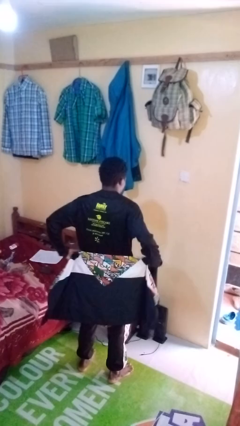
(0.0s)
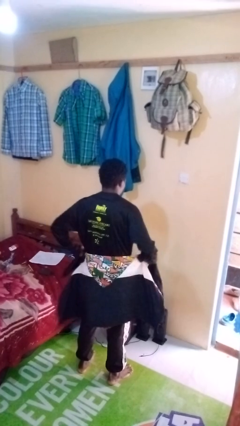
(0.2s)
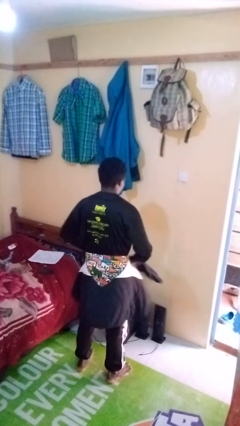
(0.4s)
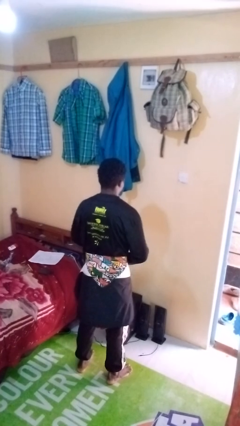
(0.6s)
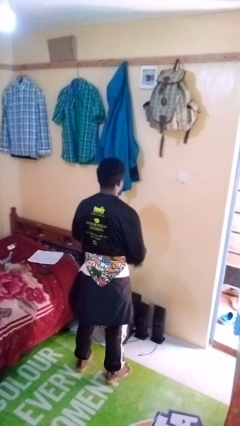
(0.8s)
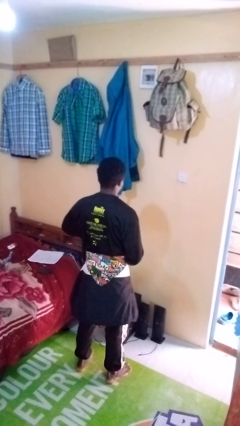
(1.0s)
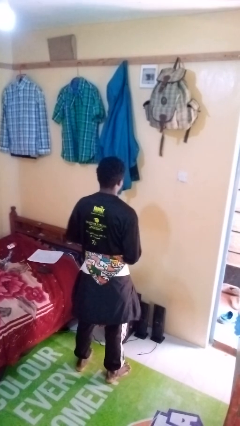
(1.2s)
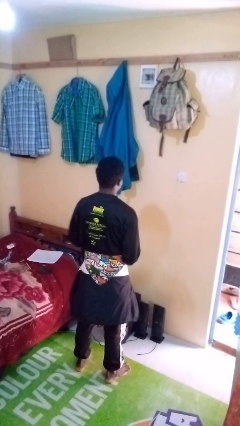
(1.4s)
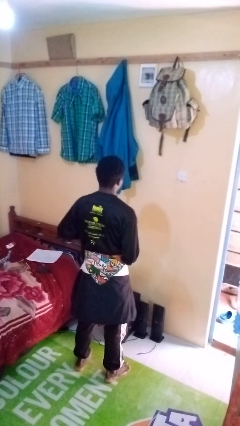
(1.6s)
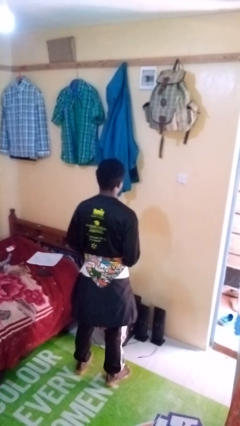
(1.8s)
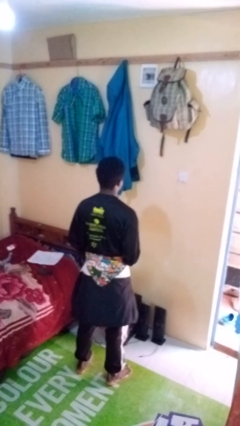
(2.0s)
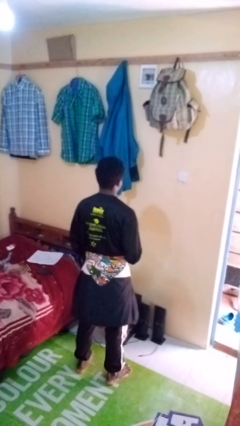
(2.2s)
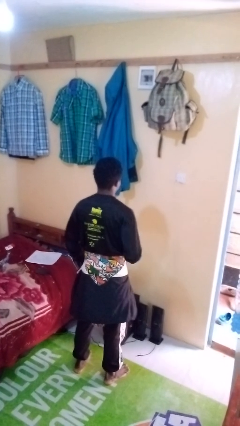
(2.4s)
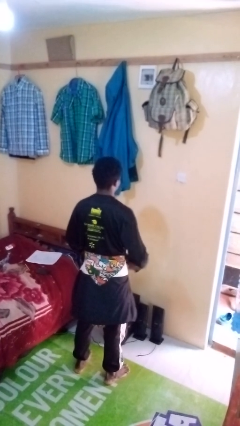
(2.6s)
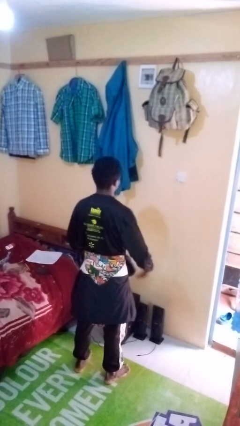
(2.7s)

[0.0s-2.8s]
person ties jacket around waist

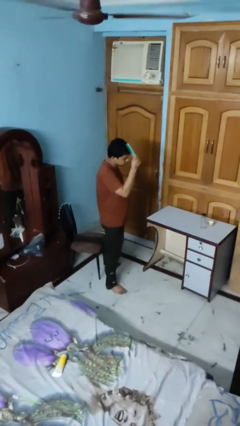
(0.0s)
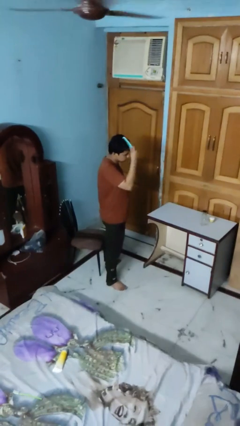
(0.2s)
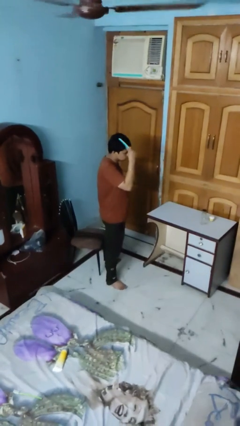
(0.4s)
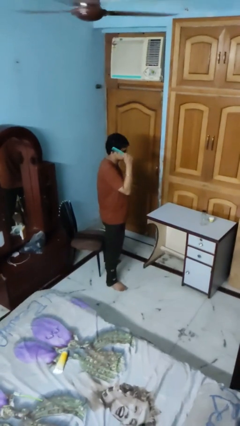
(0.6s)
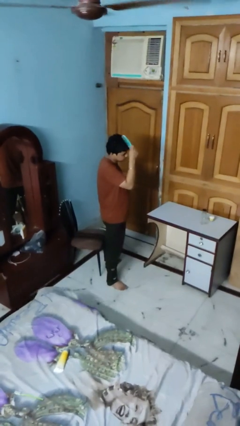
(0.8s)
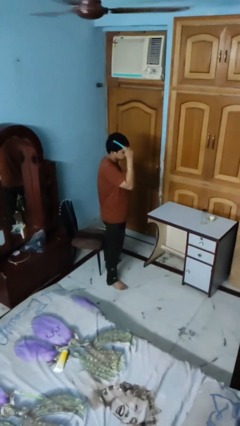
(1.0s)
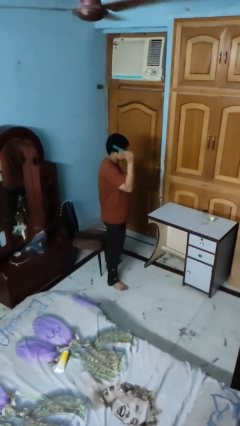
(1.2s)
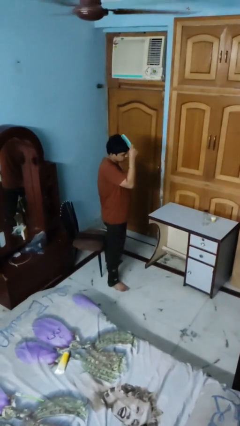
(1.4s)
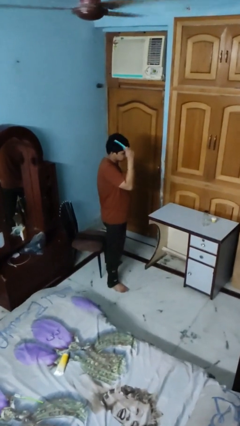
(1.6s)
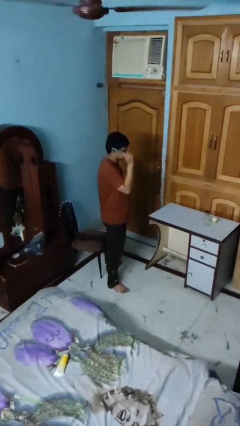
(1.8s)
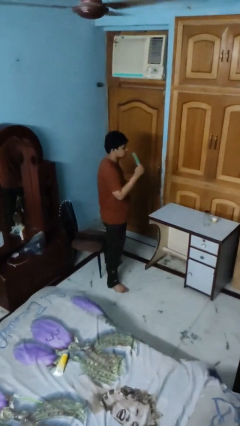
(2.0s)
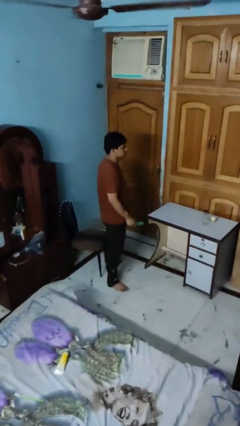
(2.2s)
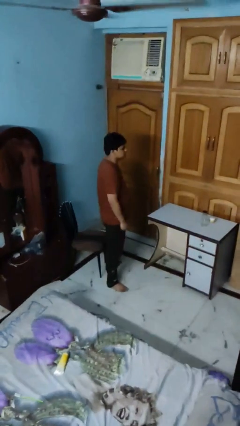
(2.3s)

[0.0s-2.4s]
person brushes hair

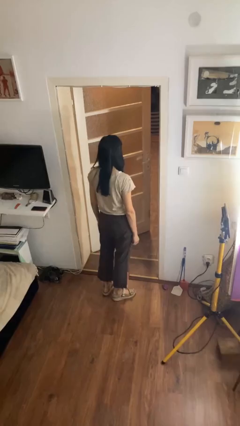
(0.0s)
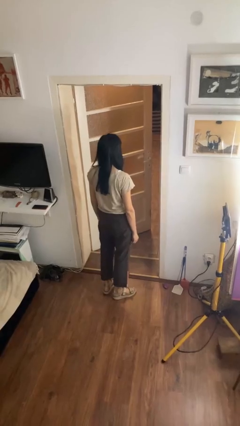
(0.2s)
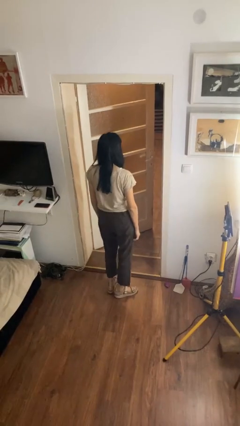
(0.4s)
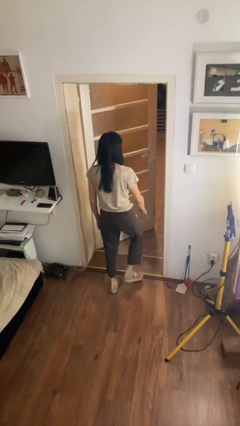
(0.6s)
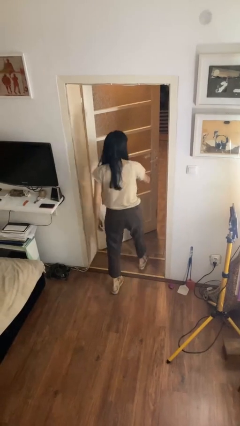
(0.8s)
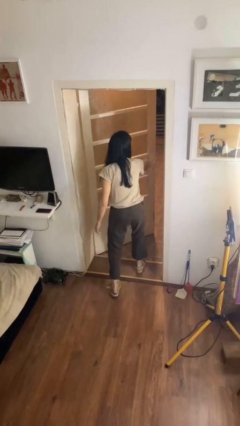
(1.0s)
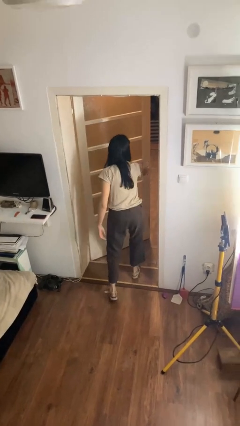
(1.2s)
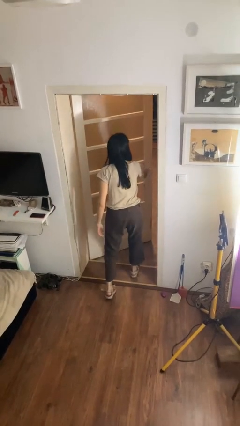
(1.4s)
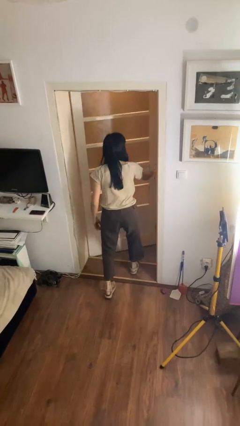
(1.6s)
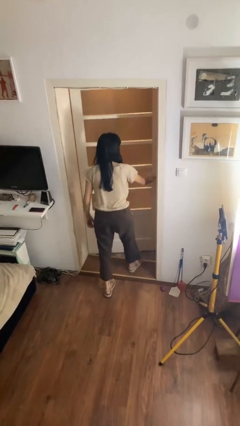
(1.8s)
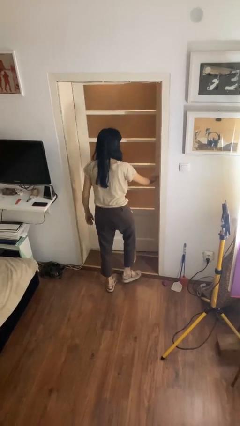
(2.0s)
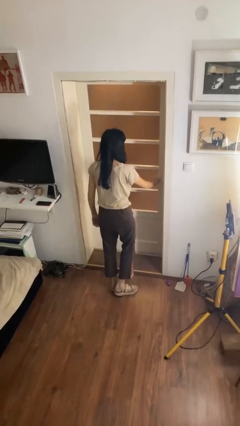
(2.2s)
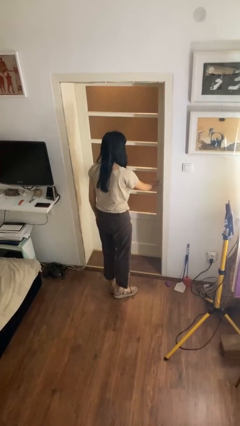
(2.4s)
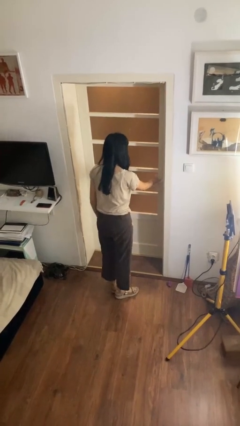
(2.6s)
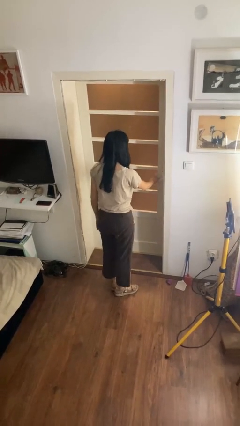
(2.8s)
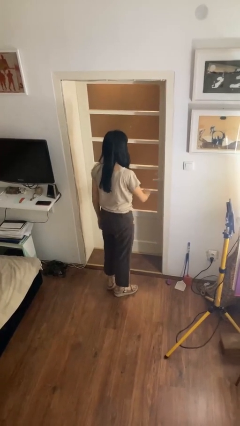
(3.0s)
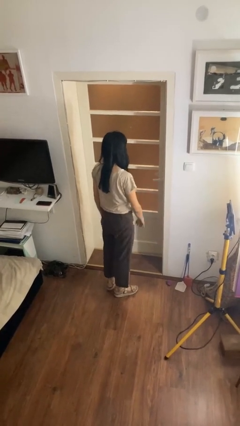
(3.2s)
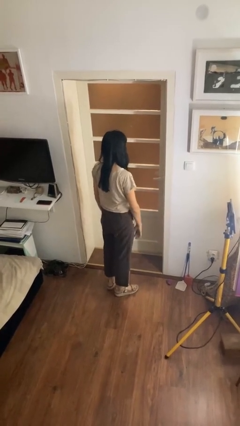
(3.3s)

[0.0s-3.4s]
person closes facility door

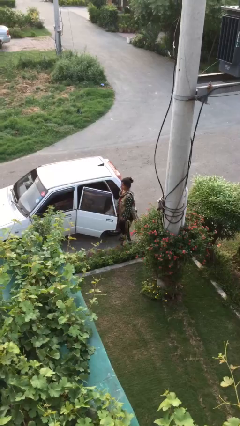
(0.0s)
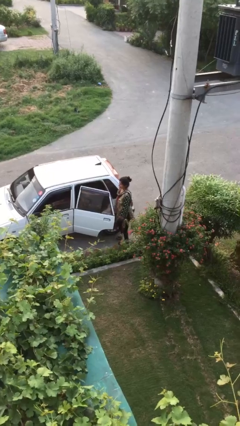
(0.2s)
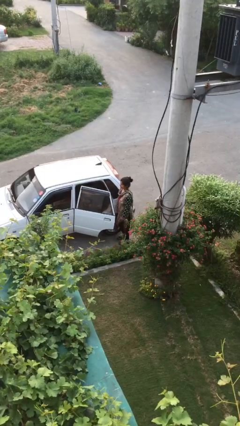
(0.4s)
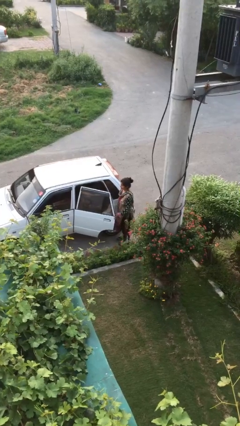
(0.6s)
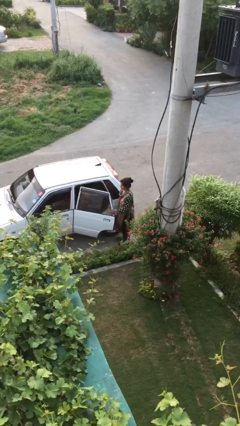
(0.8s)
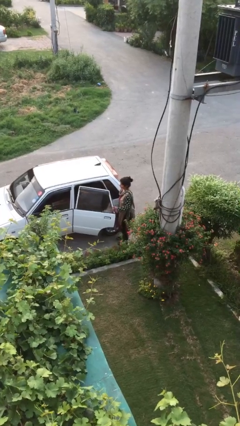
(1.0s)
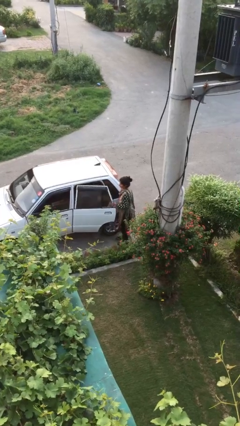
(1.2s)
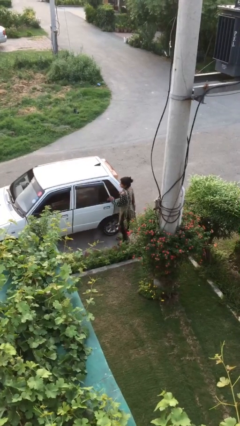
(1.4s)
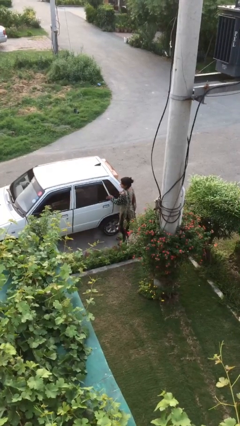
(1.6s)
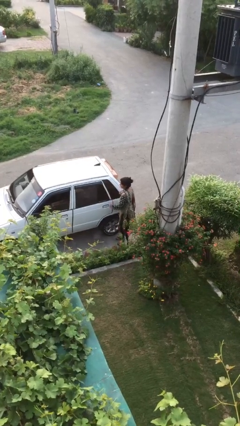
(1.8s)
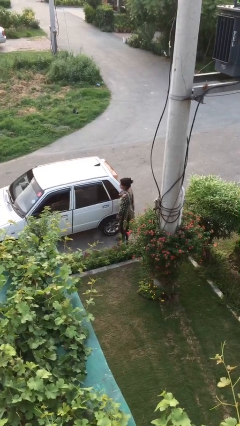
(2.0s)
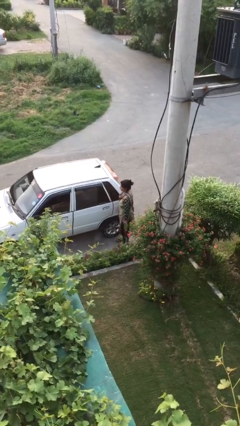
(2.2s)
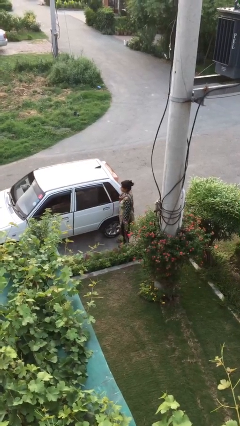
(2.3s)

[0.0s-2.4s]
person closes car door

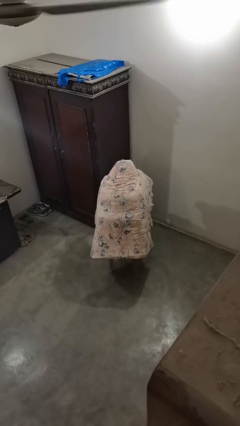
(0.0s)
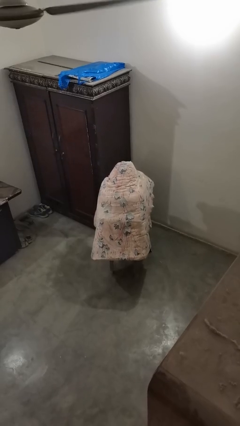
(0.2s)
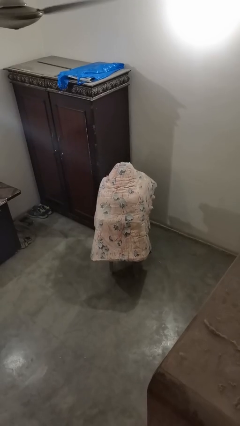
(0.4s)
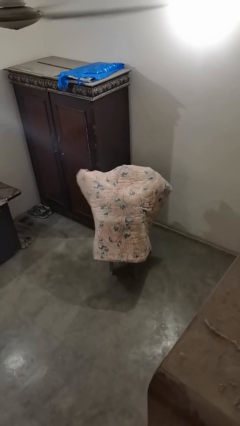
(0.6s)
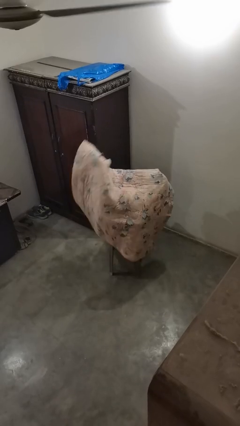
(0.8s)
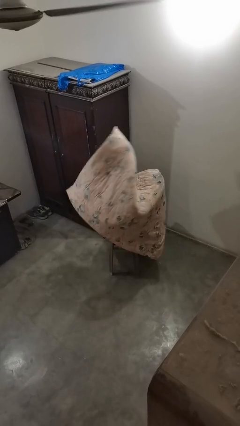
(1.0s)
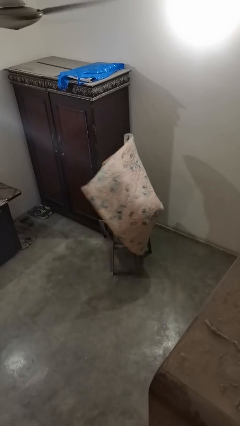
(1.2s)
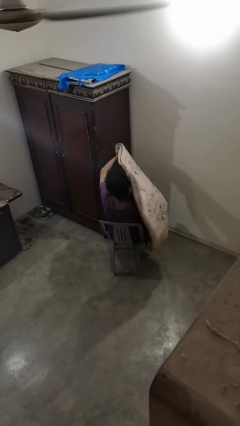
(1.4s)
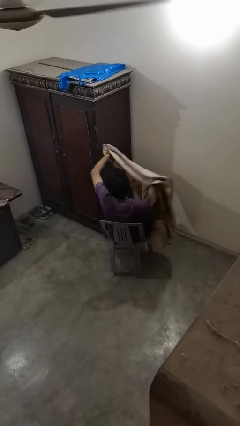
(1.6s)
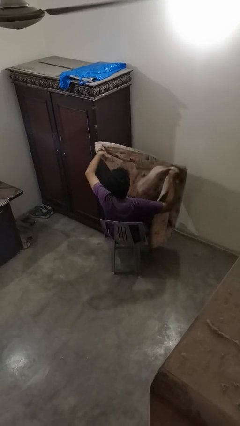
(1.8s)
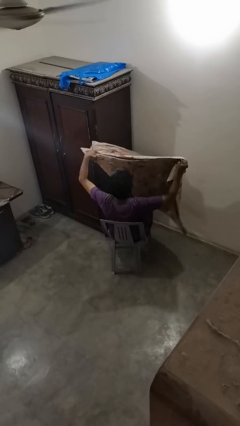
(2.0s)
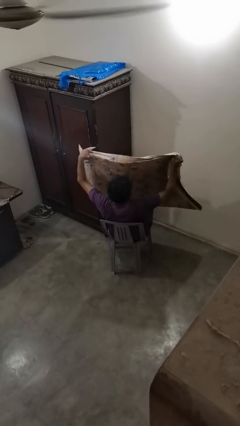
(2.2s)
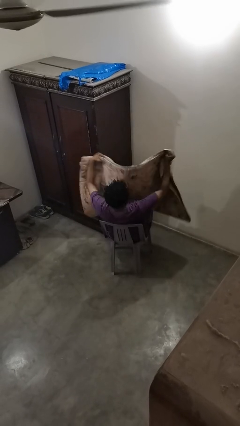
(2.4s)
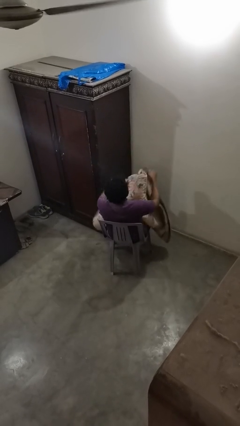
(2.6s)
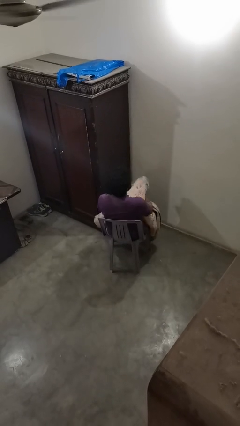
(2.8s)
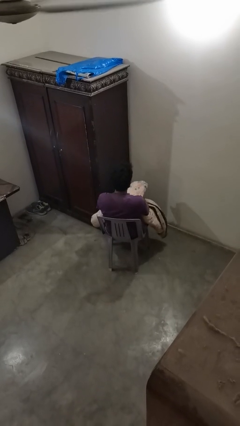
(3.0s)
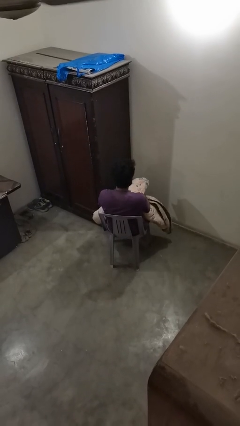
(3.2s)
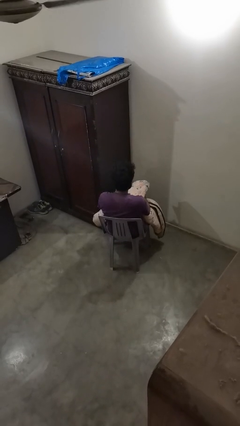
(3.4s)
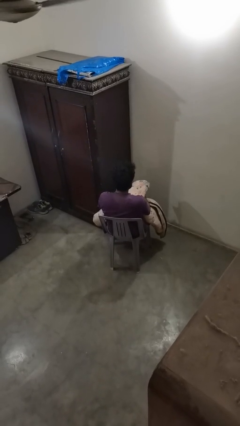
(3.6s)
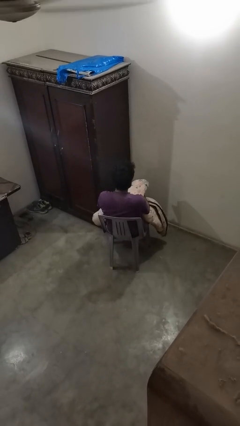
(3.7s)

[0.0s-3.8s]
person uncovers with blanket

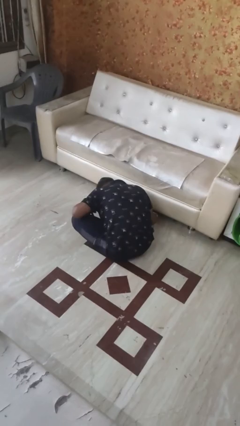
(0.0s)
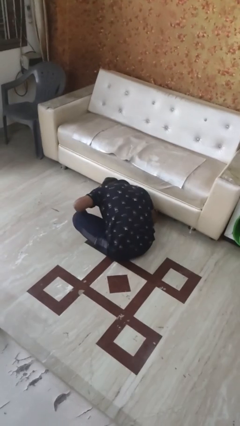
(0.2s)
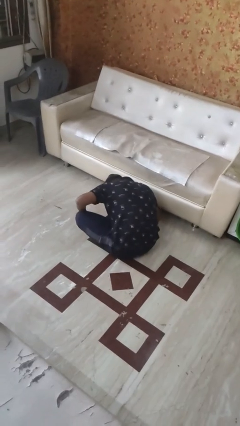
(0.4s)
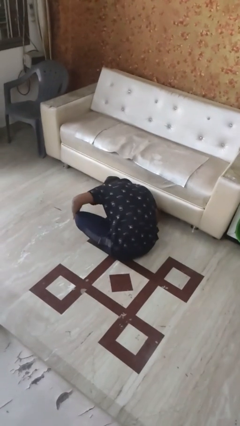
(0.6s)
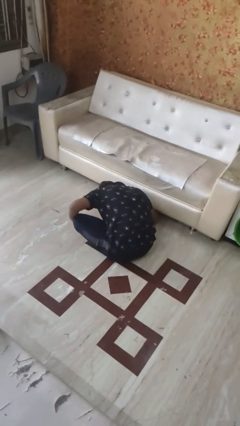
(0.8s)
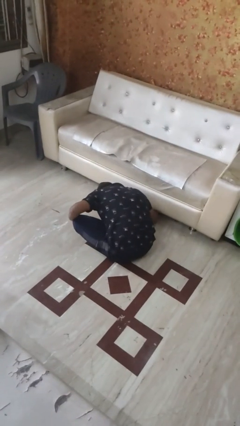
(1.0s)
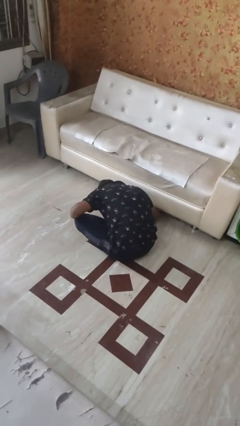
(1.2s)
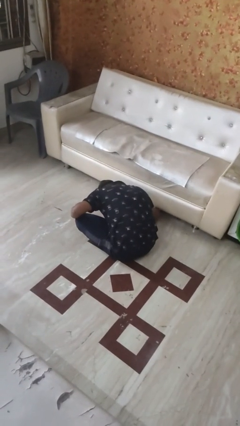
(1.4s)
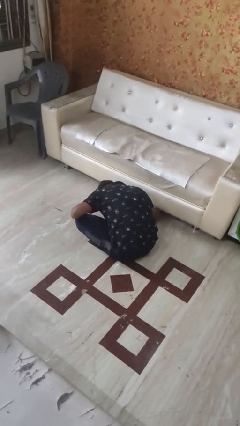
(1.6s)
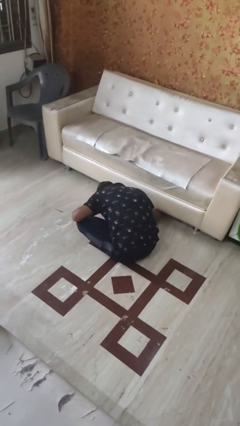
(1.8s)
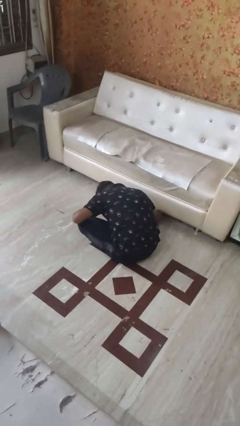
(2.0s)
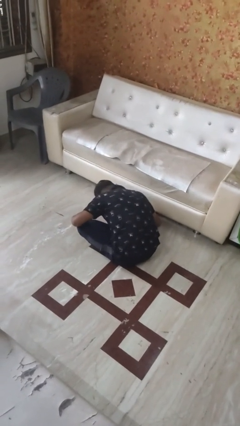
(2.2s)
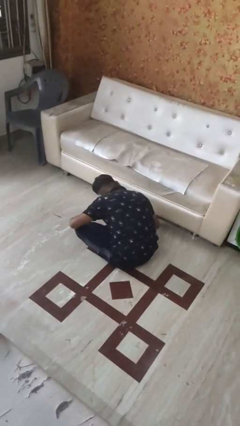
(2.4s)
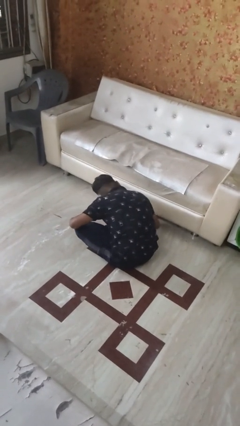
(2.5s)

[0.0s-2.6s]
person searches under bed

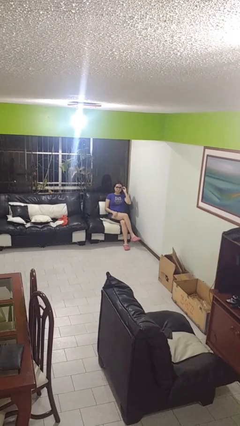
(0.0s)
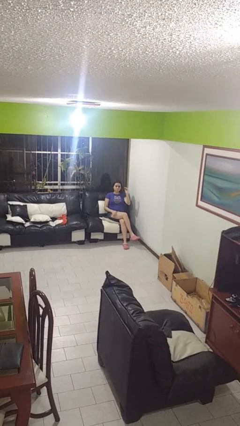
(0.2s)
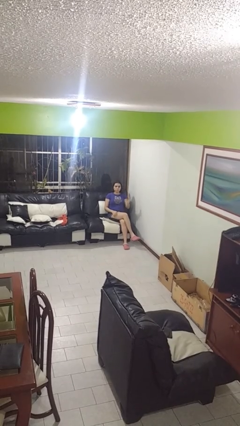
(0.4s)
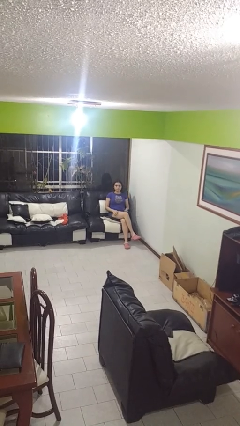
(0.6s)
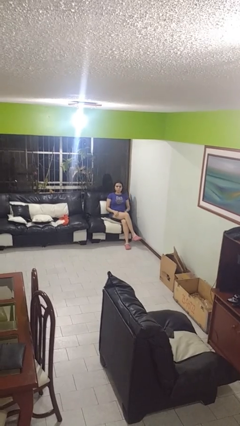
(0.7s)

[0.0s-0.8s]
person takes off glasses
